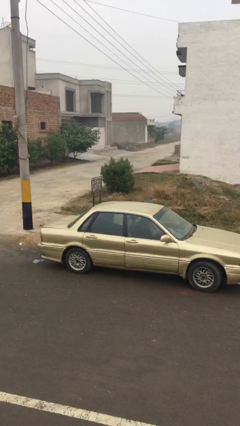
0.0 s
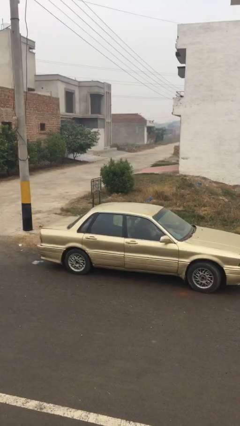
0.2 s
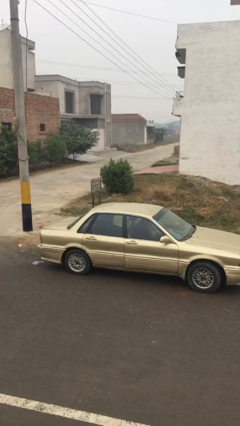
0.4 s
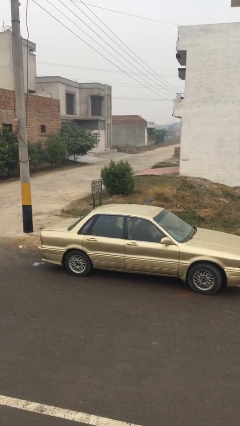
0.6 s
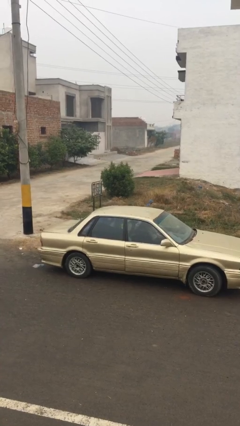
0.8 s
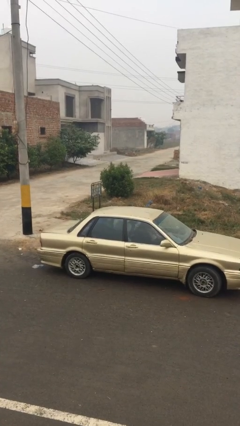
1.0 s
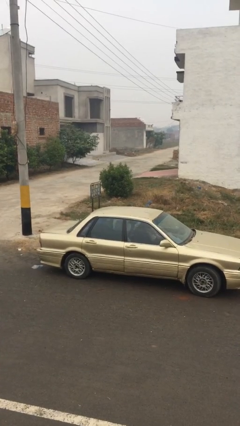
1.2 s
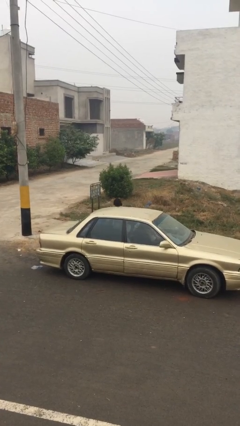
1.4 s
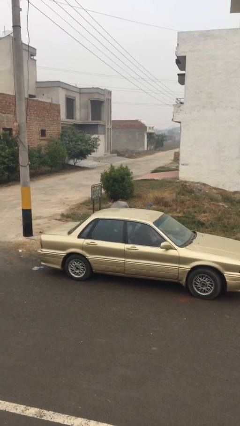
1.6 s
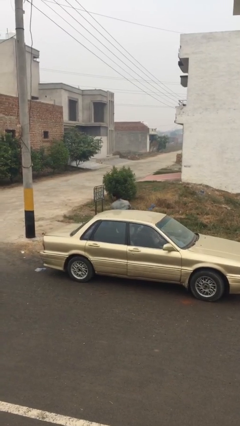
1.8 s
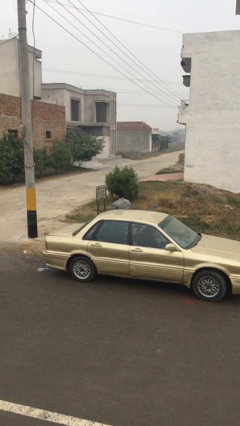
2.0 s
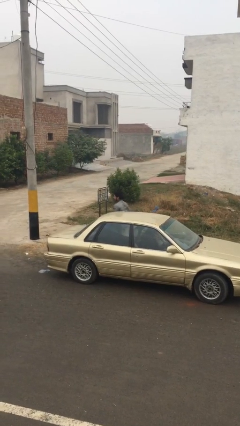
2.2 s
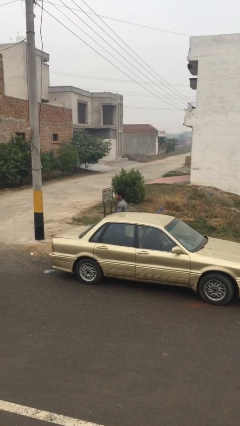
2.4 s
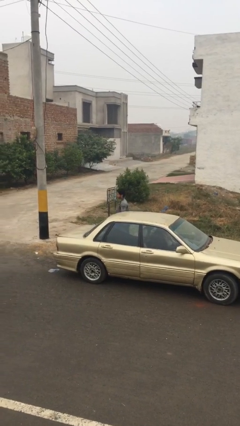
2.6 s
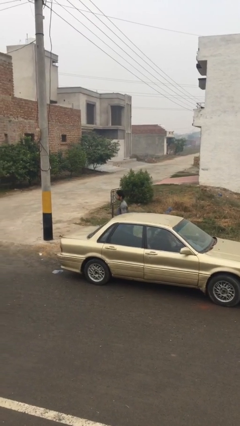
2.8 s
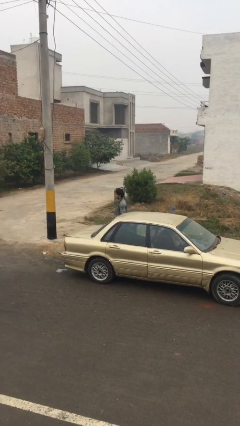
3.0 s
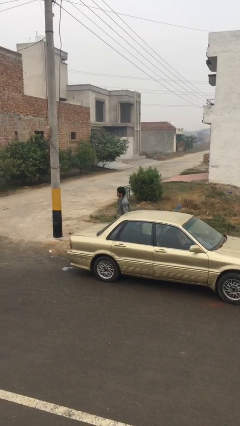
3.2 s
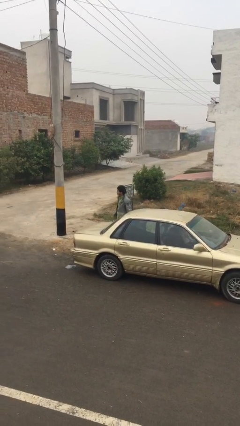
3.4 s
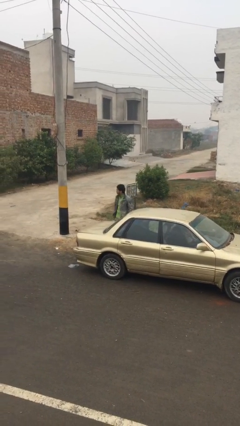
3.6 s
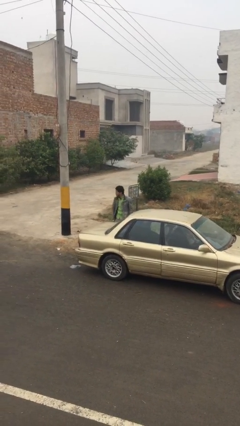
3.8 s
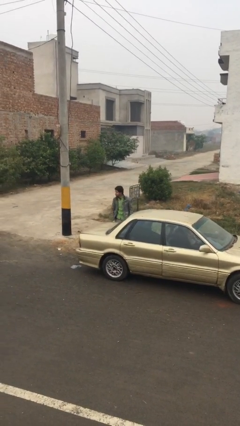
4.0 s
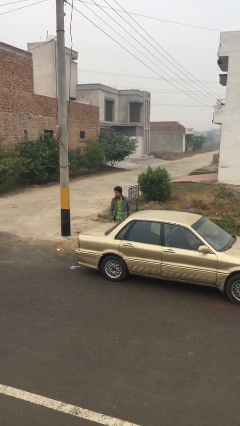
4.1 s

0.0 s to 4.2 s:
person exits car

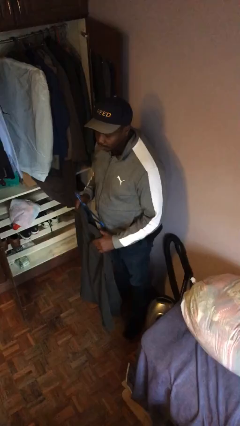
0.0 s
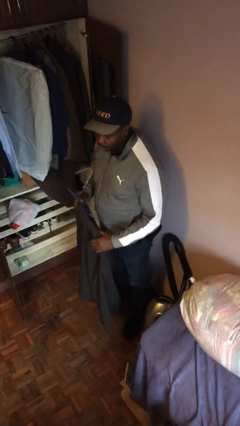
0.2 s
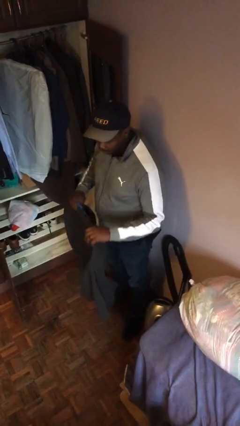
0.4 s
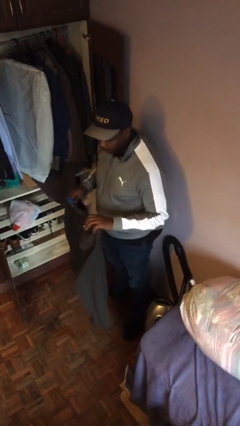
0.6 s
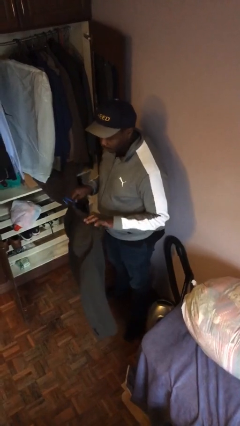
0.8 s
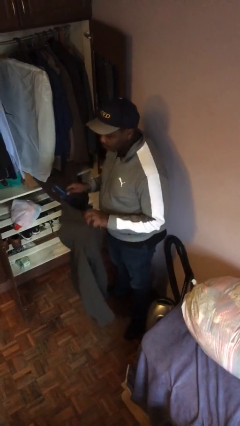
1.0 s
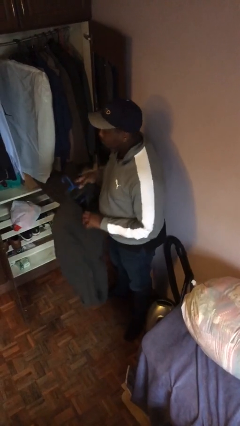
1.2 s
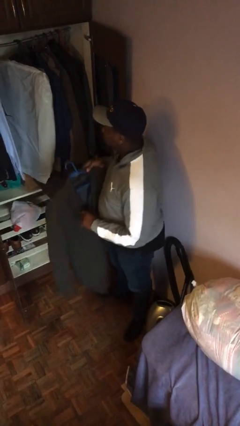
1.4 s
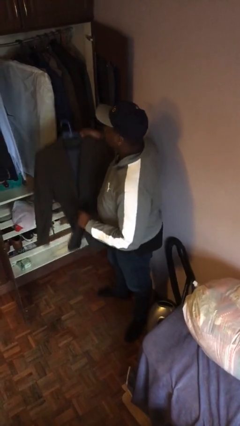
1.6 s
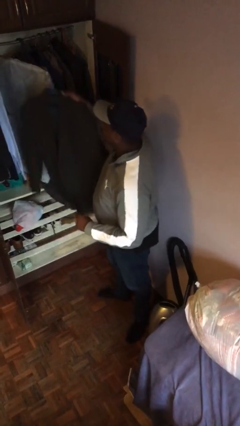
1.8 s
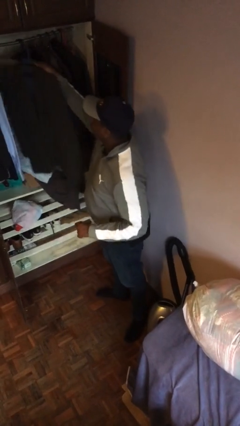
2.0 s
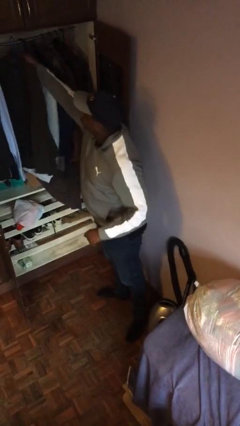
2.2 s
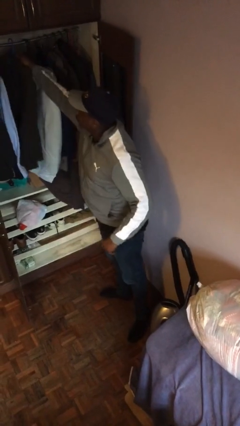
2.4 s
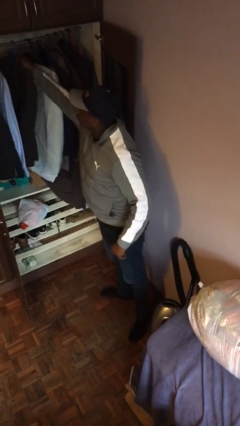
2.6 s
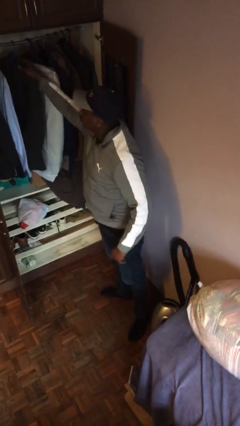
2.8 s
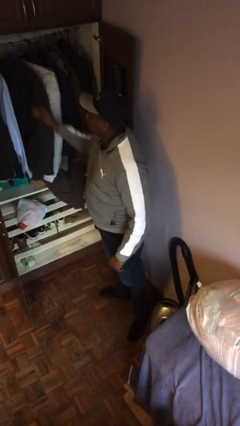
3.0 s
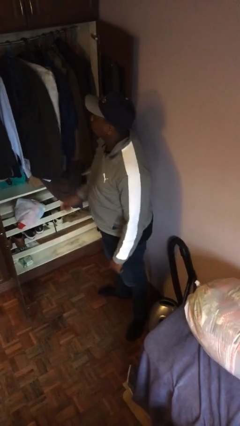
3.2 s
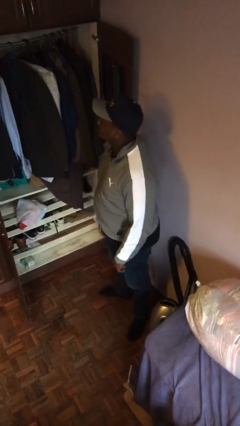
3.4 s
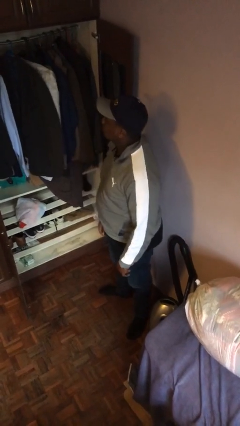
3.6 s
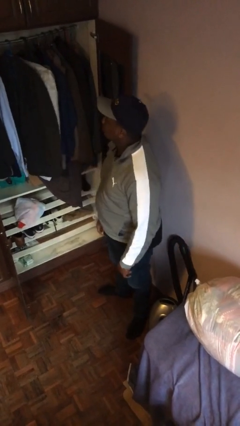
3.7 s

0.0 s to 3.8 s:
person puts clothes into closet

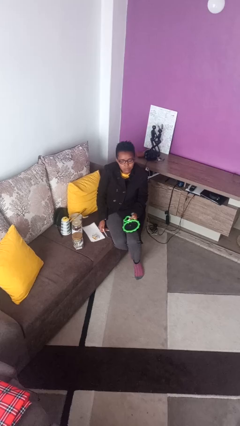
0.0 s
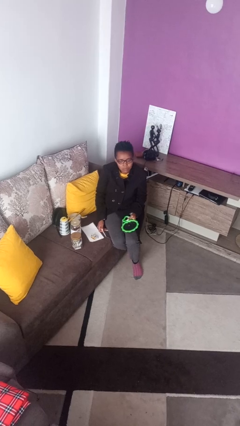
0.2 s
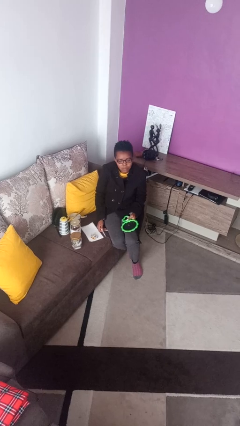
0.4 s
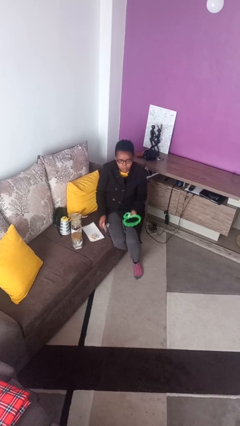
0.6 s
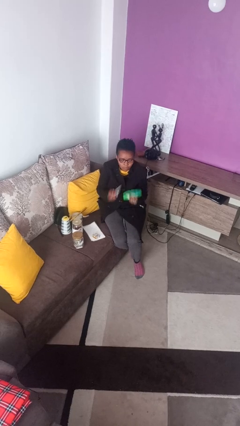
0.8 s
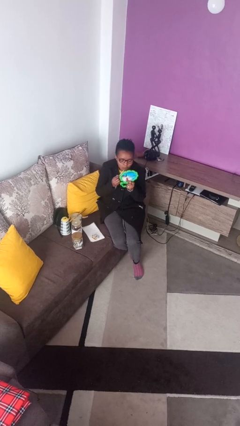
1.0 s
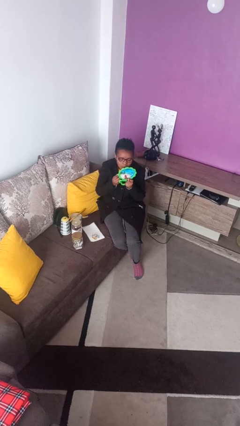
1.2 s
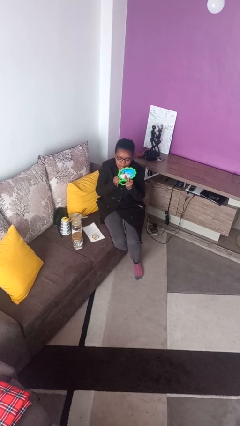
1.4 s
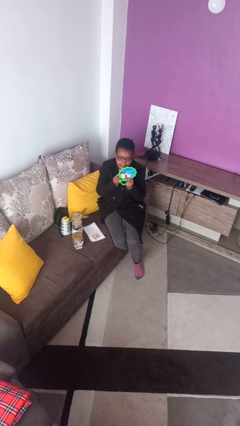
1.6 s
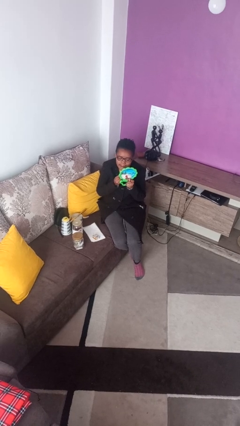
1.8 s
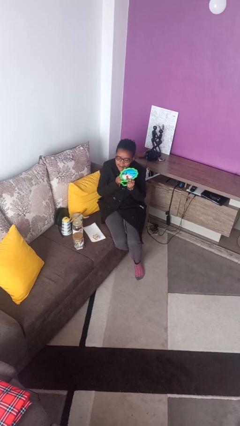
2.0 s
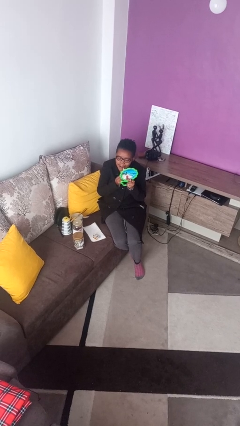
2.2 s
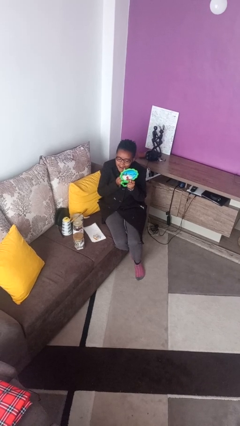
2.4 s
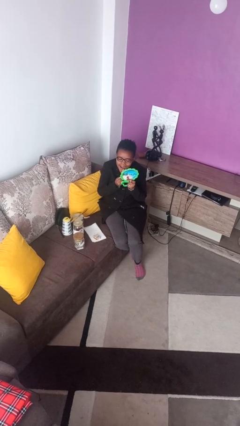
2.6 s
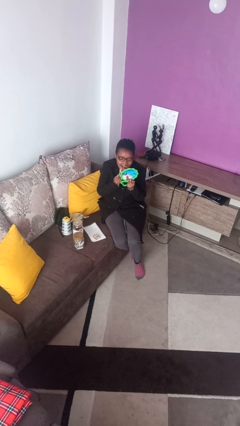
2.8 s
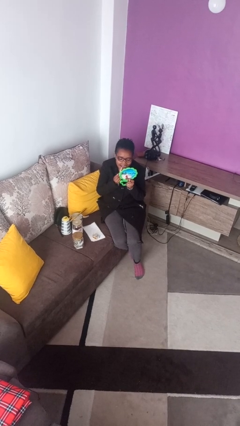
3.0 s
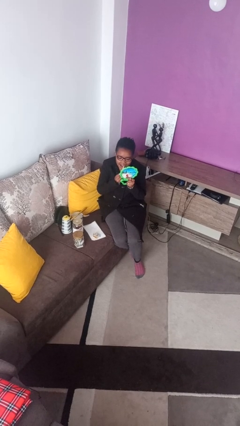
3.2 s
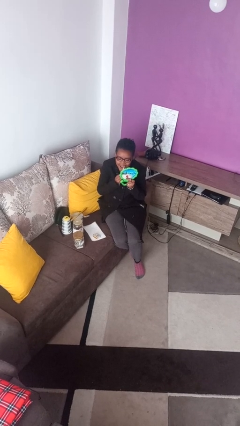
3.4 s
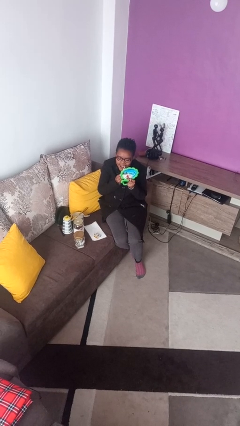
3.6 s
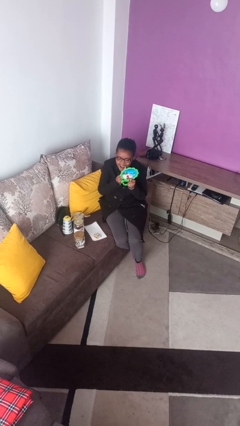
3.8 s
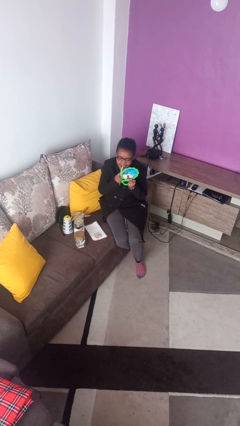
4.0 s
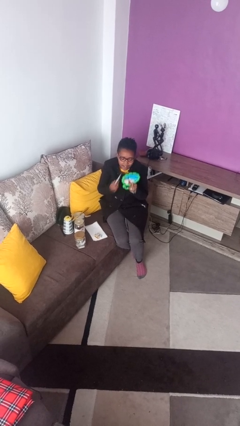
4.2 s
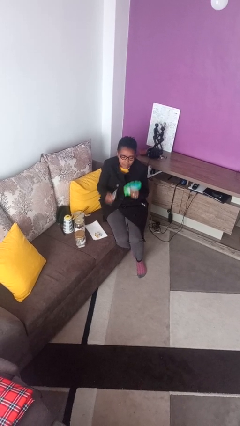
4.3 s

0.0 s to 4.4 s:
person applies lip makeup

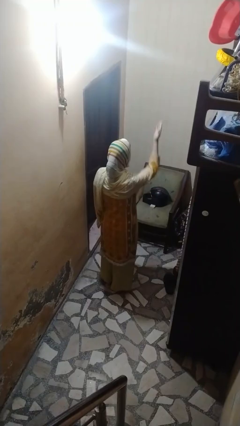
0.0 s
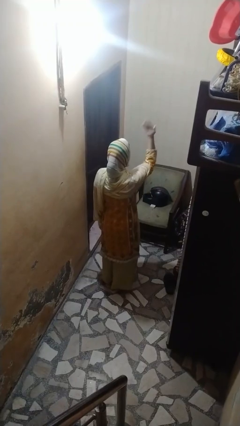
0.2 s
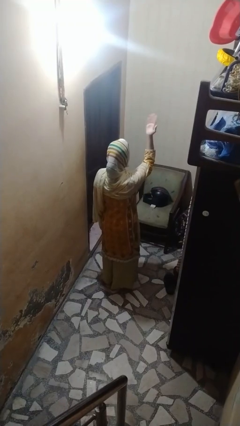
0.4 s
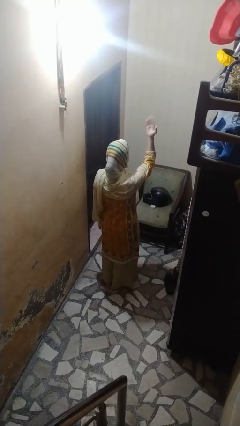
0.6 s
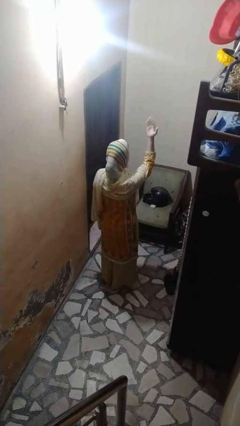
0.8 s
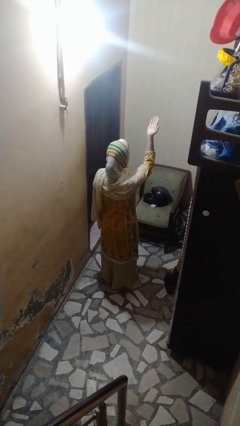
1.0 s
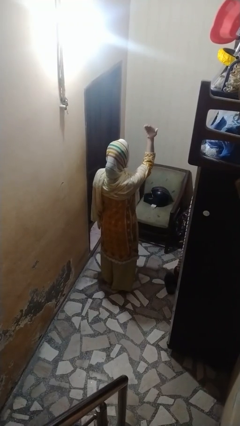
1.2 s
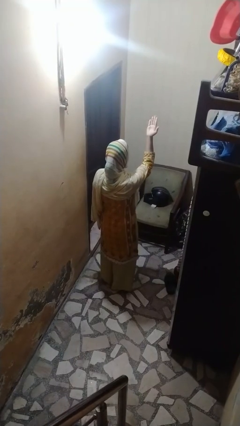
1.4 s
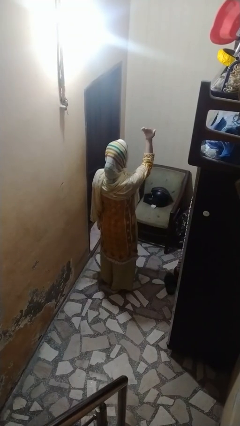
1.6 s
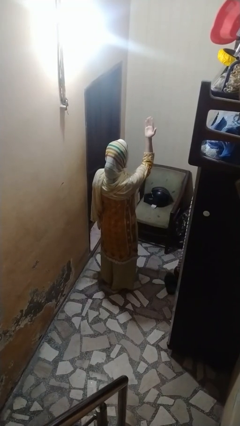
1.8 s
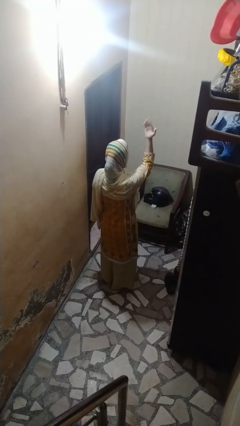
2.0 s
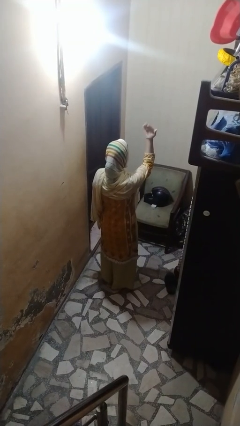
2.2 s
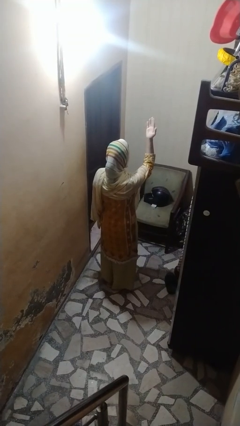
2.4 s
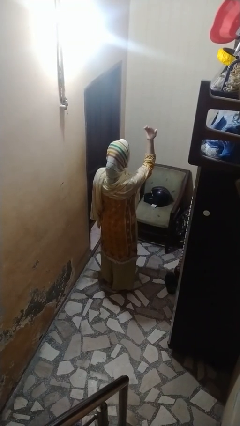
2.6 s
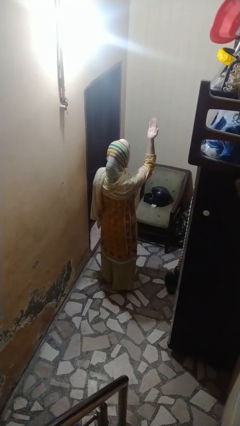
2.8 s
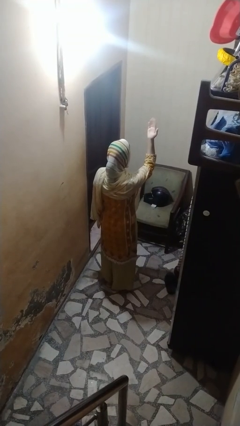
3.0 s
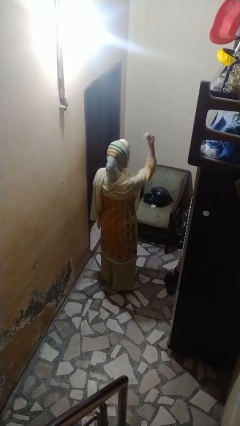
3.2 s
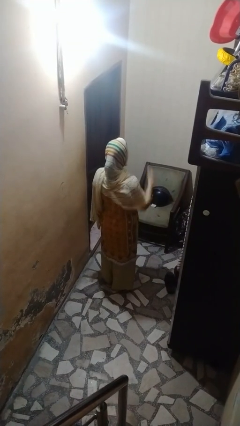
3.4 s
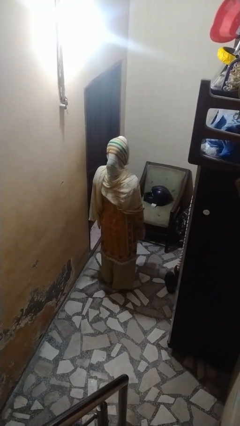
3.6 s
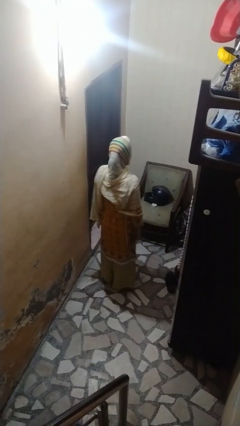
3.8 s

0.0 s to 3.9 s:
person gestures come here

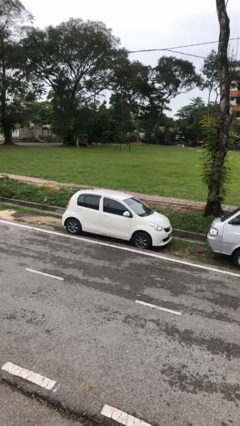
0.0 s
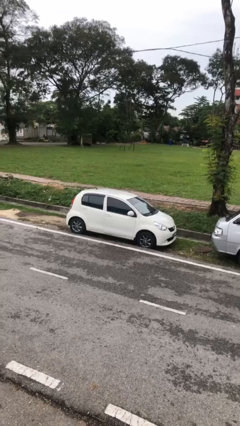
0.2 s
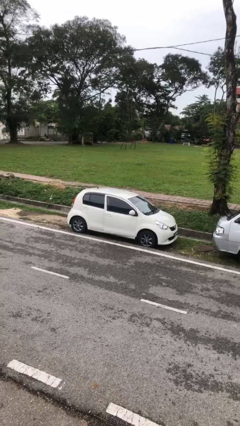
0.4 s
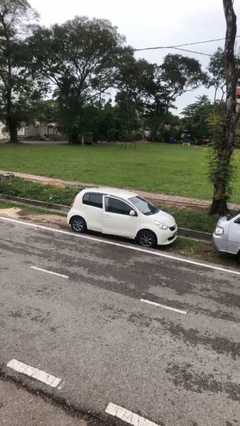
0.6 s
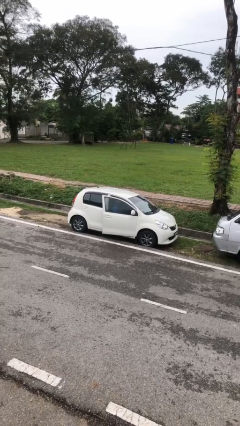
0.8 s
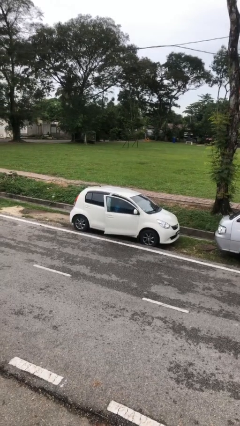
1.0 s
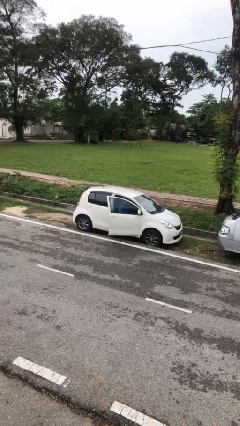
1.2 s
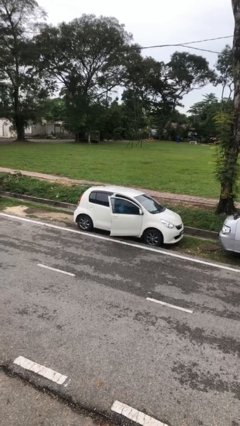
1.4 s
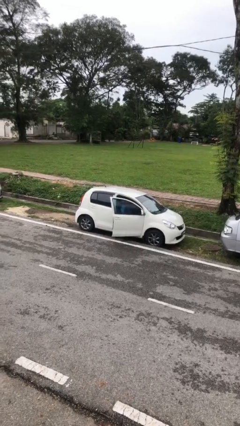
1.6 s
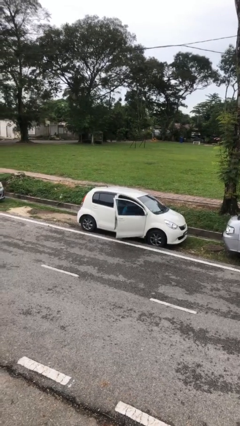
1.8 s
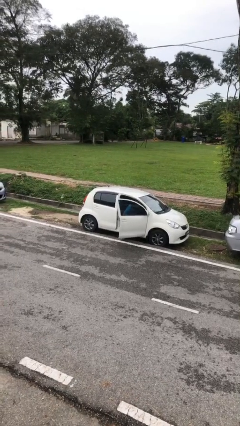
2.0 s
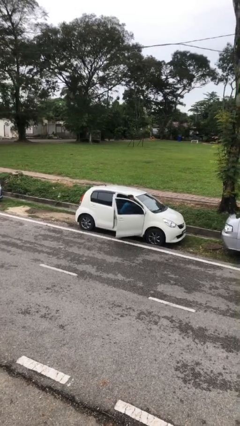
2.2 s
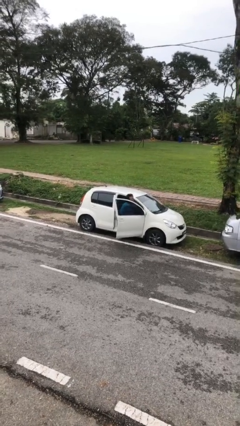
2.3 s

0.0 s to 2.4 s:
person opens car door
